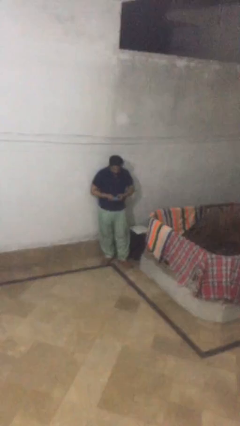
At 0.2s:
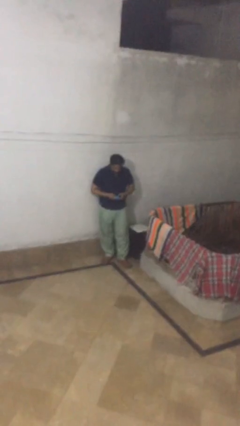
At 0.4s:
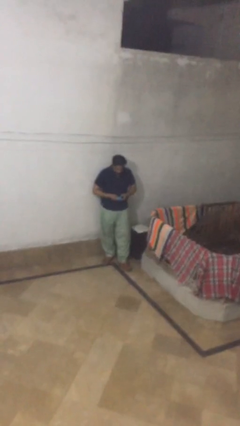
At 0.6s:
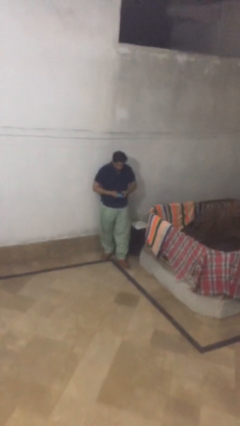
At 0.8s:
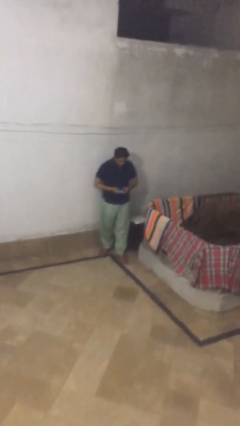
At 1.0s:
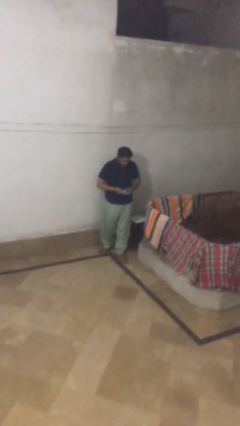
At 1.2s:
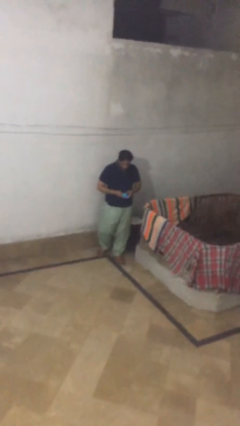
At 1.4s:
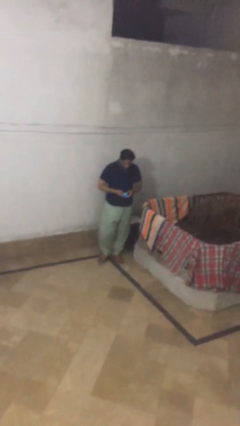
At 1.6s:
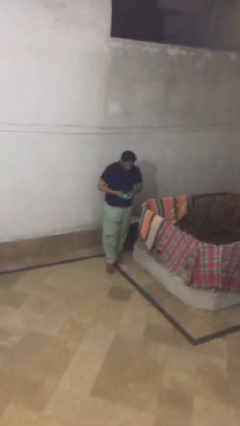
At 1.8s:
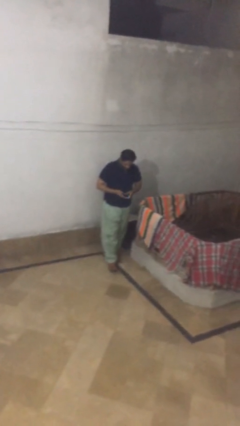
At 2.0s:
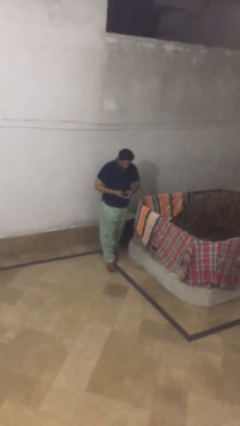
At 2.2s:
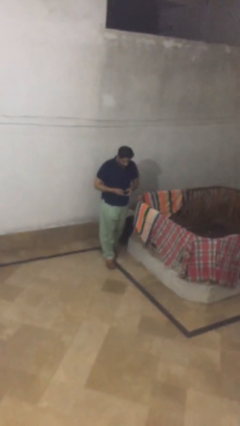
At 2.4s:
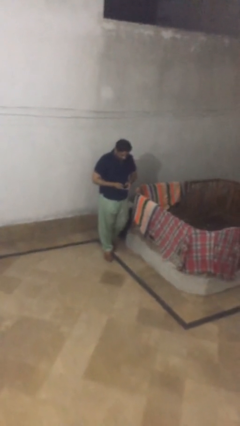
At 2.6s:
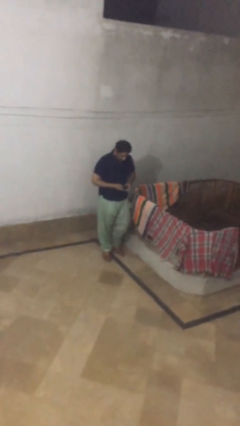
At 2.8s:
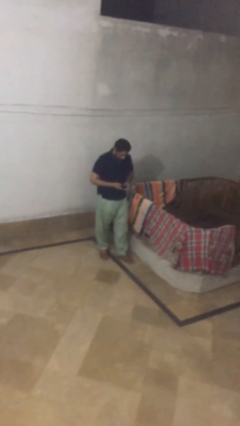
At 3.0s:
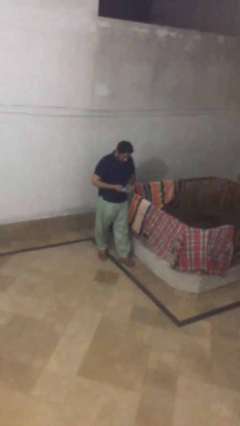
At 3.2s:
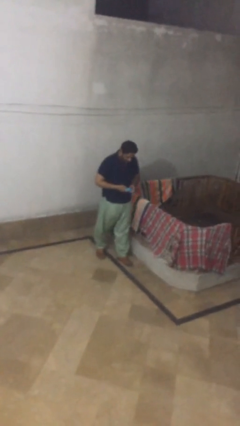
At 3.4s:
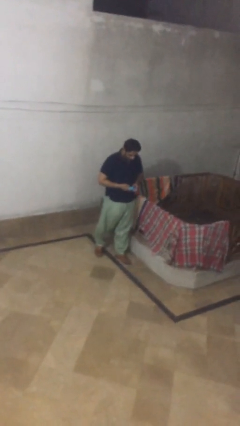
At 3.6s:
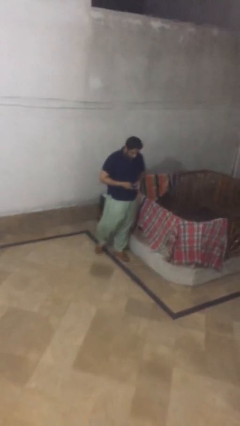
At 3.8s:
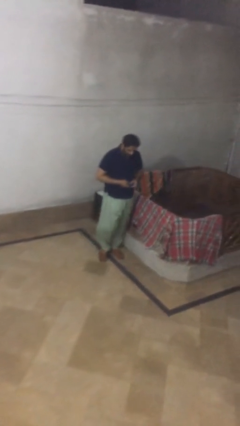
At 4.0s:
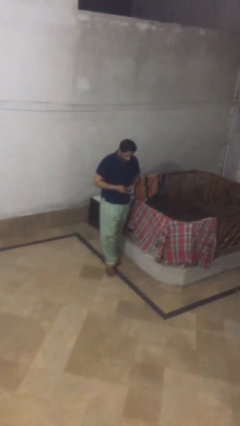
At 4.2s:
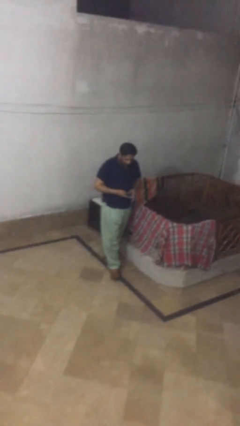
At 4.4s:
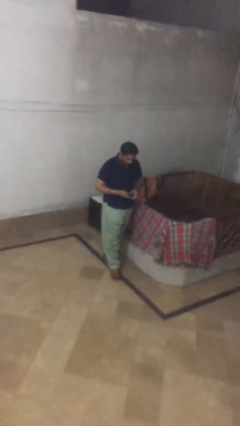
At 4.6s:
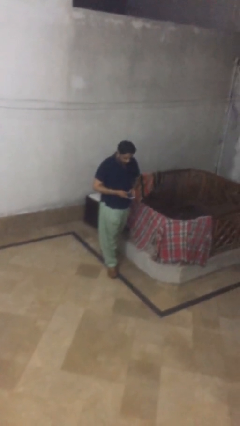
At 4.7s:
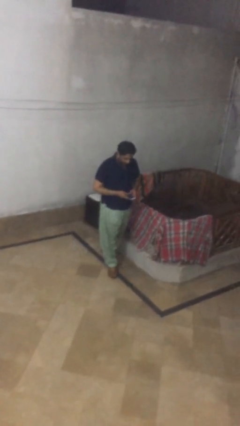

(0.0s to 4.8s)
person texts on phone

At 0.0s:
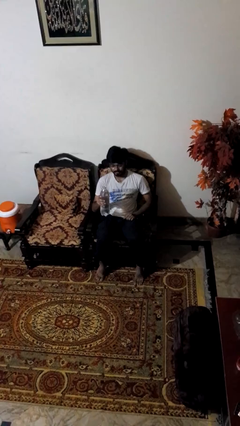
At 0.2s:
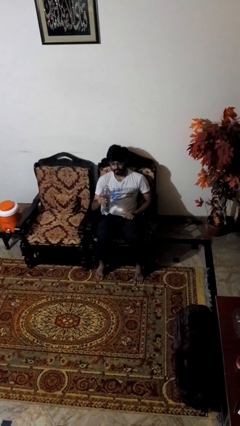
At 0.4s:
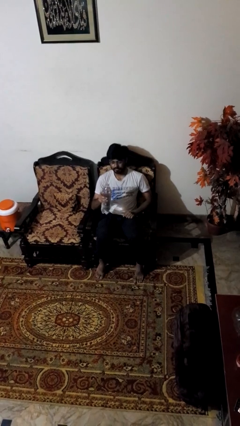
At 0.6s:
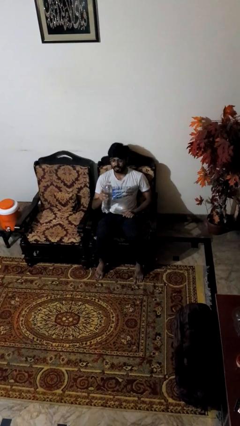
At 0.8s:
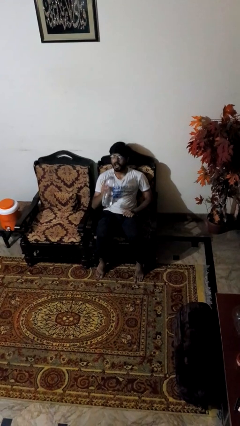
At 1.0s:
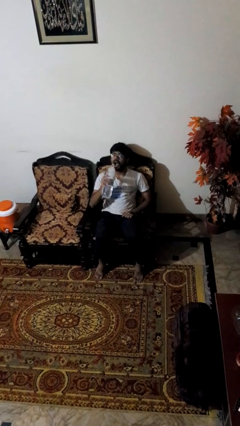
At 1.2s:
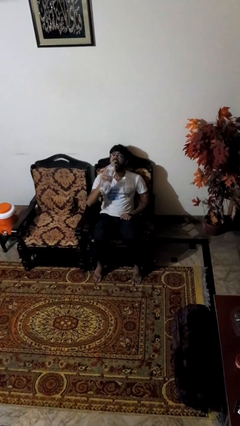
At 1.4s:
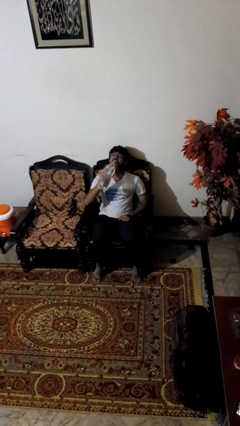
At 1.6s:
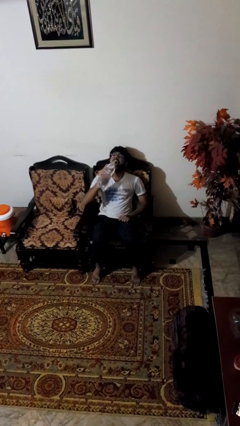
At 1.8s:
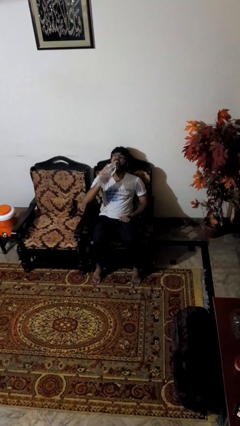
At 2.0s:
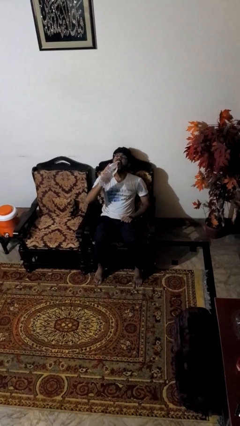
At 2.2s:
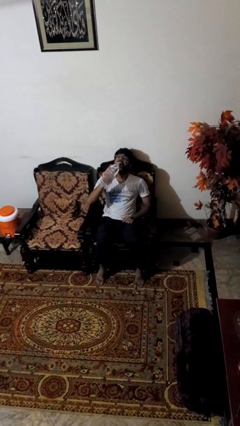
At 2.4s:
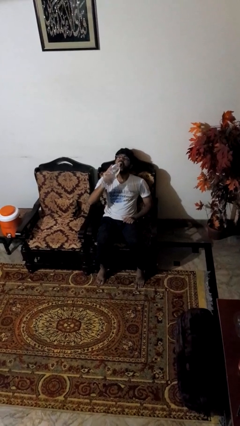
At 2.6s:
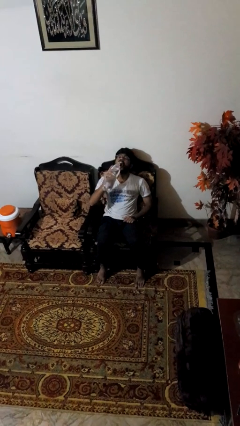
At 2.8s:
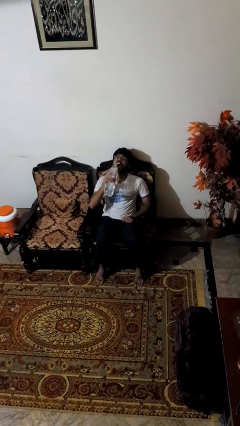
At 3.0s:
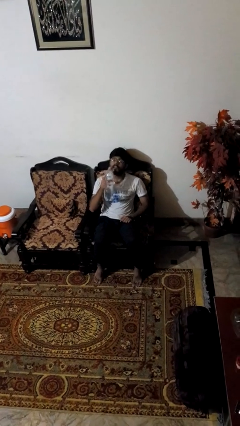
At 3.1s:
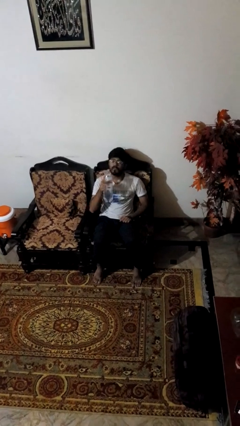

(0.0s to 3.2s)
person drinks from bottle

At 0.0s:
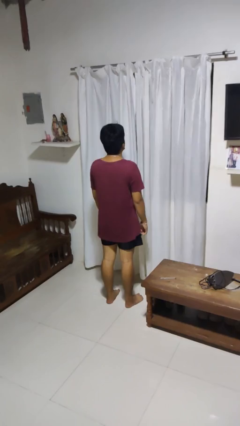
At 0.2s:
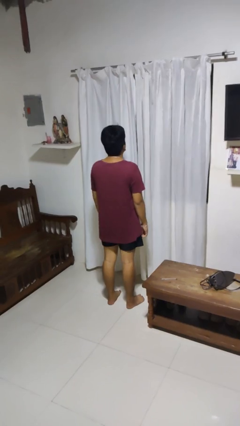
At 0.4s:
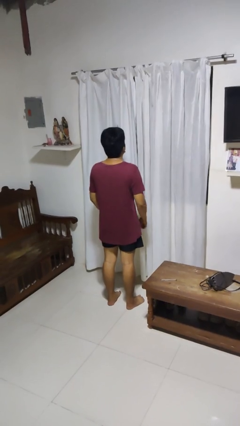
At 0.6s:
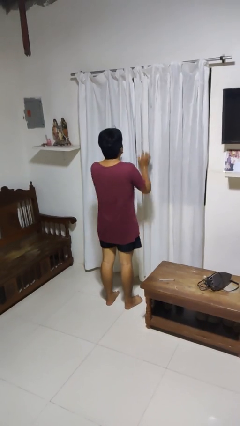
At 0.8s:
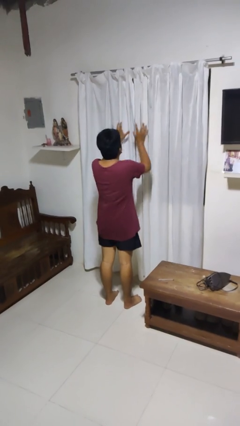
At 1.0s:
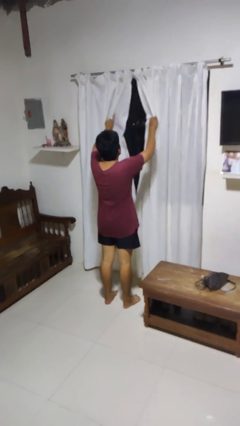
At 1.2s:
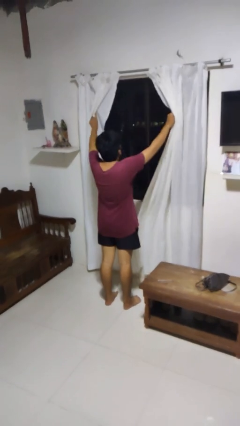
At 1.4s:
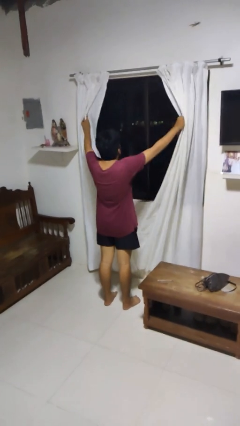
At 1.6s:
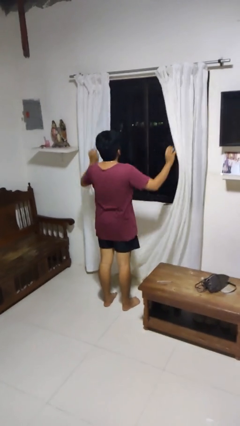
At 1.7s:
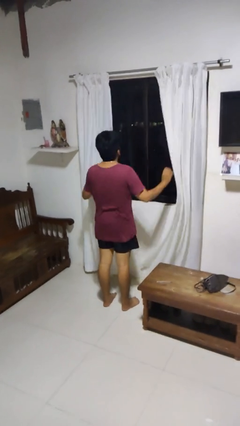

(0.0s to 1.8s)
person opens curtains

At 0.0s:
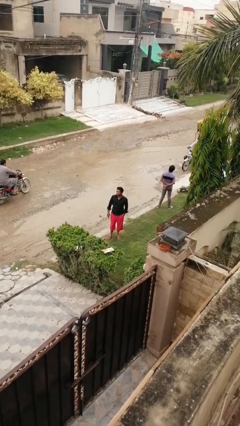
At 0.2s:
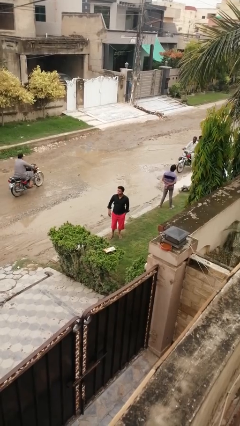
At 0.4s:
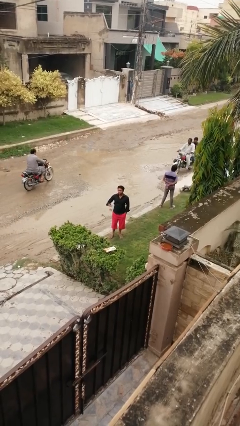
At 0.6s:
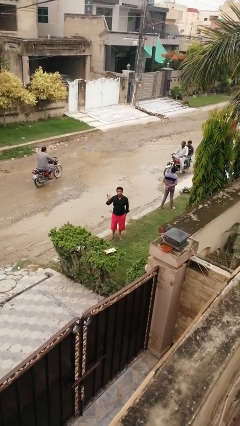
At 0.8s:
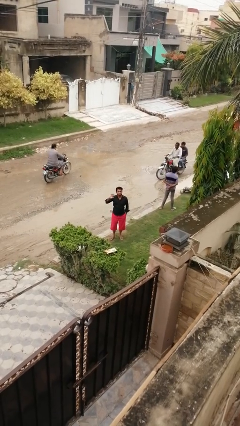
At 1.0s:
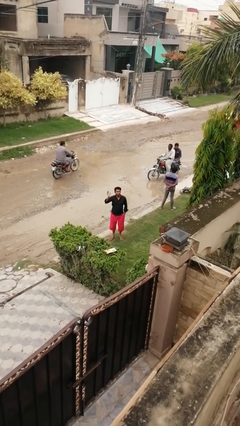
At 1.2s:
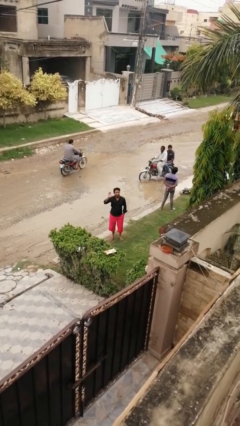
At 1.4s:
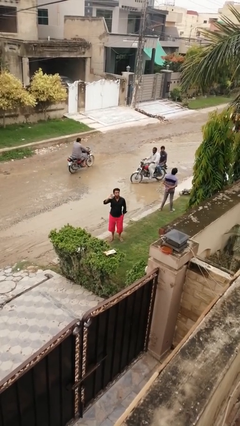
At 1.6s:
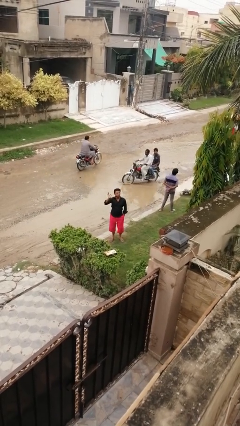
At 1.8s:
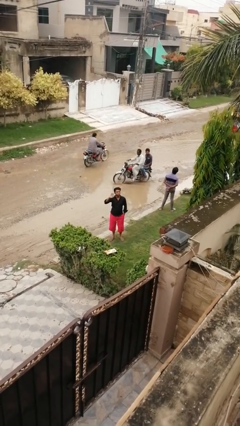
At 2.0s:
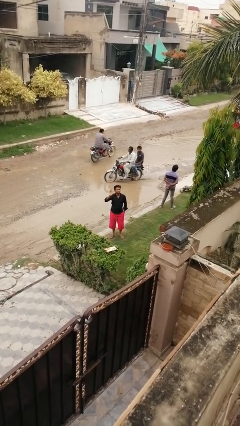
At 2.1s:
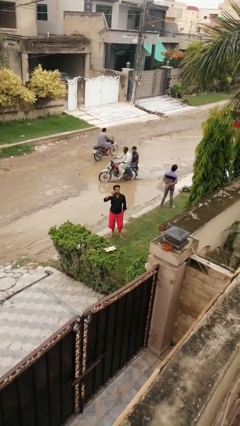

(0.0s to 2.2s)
person waves at person

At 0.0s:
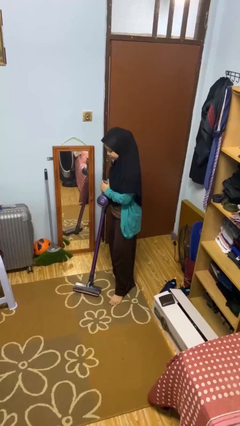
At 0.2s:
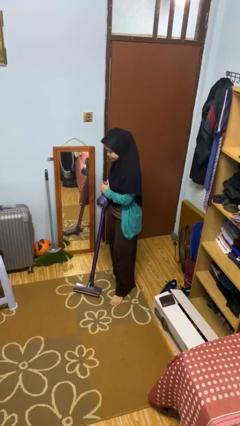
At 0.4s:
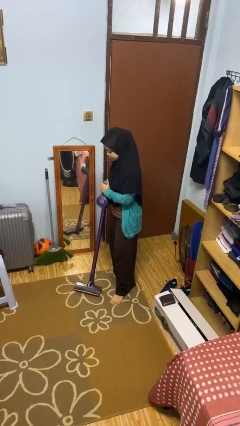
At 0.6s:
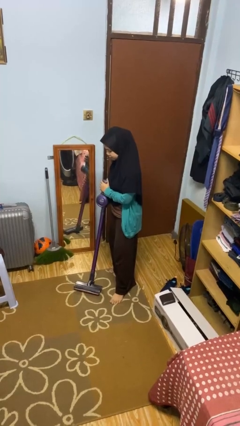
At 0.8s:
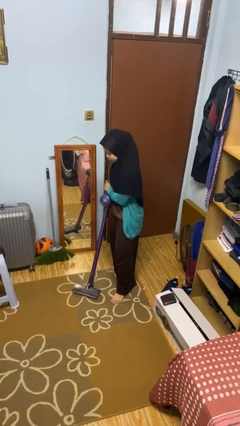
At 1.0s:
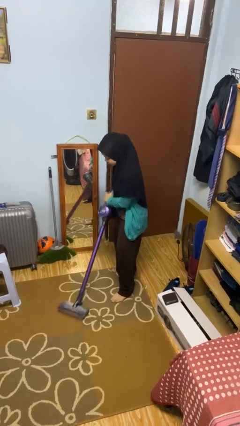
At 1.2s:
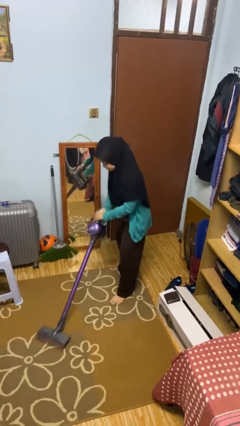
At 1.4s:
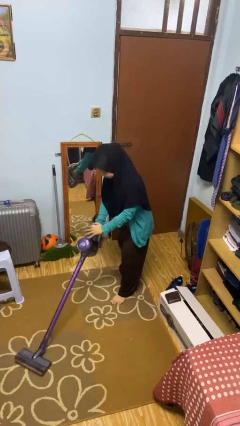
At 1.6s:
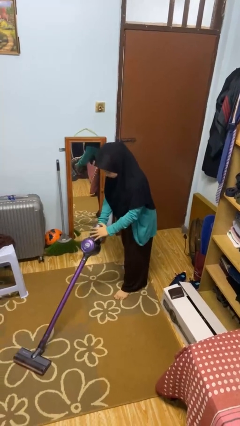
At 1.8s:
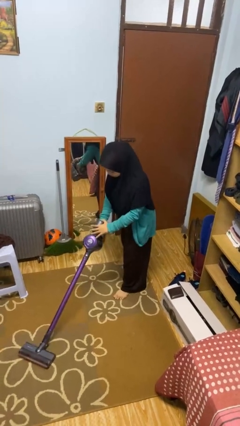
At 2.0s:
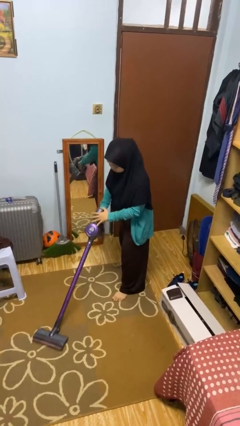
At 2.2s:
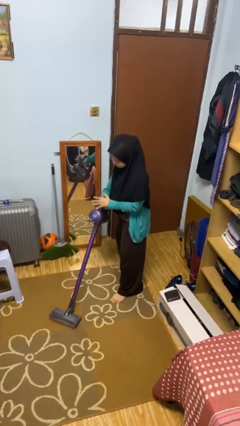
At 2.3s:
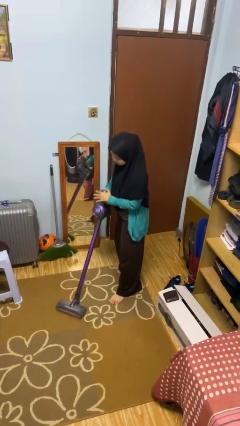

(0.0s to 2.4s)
person vacuums carpet

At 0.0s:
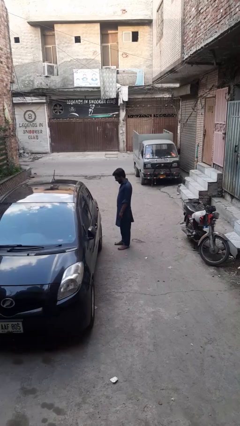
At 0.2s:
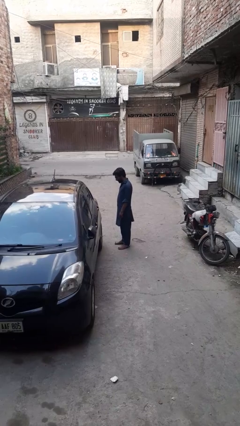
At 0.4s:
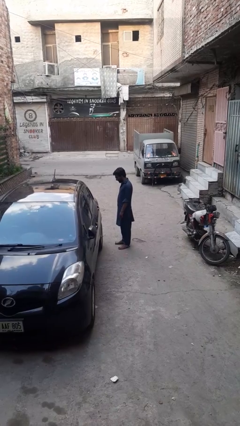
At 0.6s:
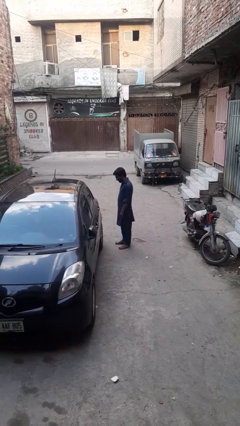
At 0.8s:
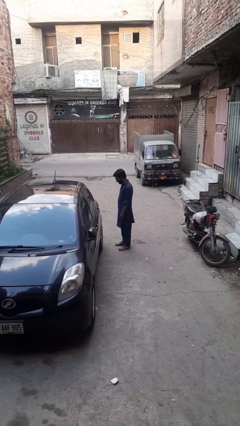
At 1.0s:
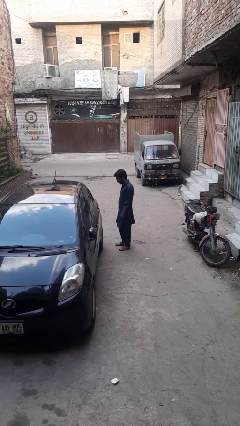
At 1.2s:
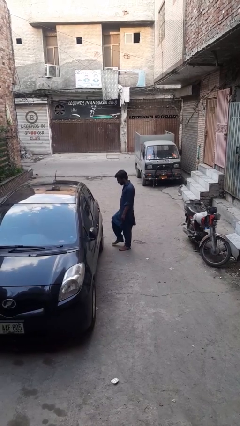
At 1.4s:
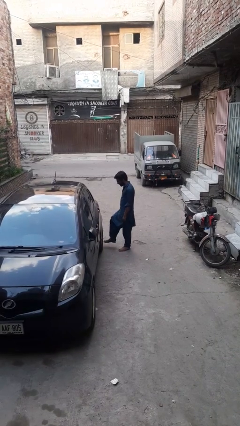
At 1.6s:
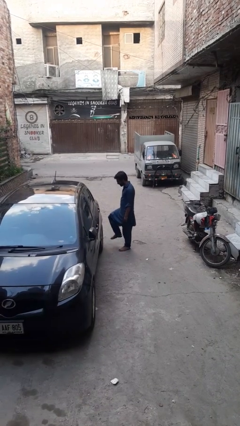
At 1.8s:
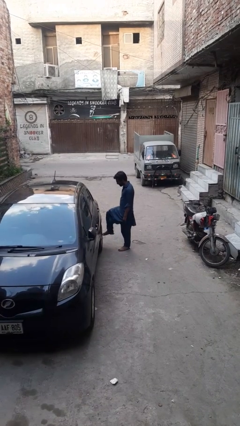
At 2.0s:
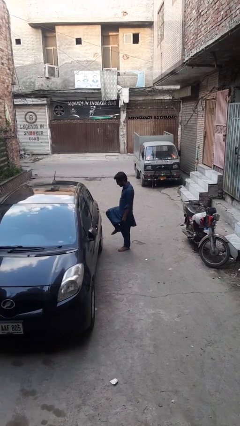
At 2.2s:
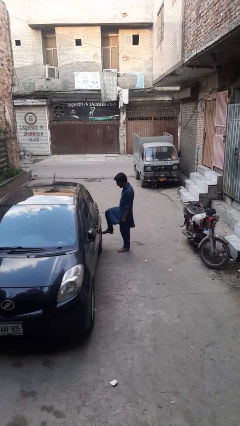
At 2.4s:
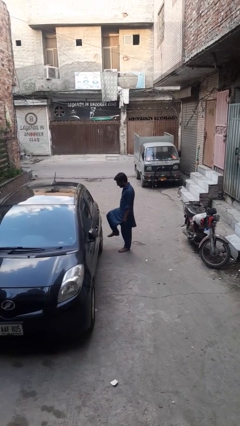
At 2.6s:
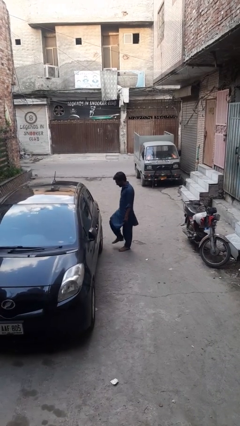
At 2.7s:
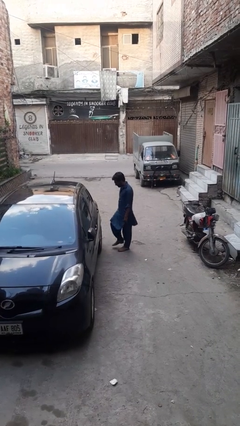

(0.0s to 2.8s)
person kicks car tires

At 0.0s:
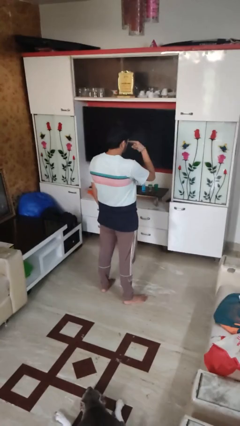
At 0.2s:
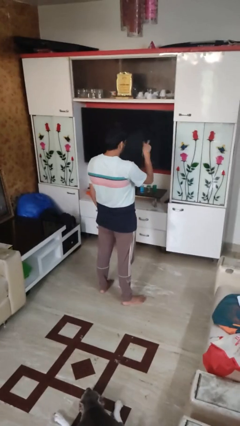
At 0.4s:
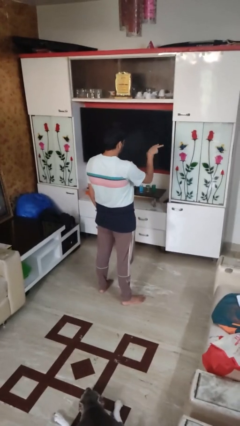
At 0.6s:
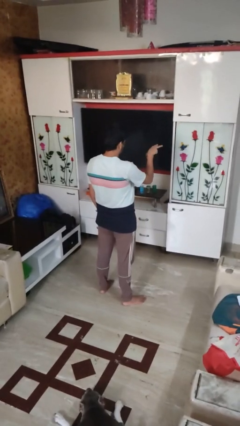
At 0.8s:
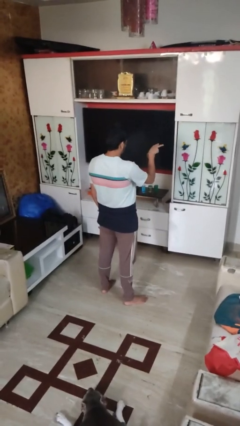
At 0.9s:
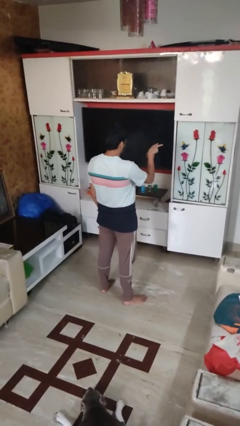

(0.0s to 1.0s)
person gestures watch closely
